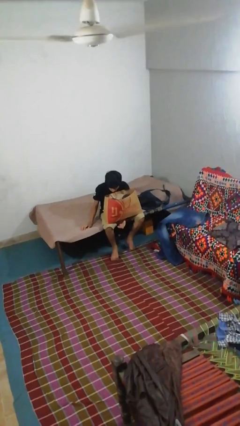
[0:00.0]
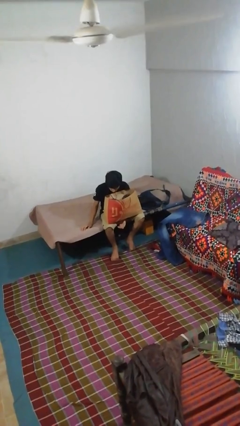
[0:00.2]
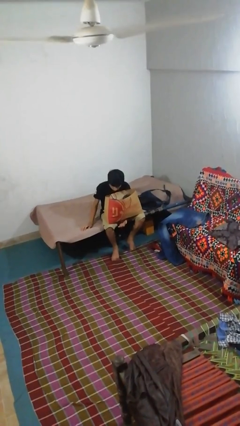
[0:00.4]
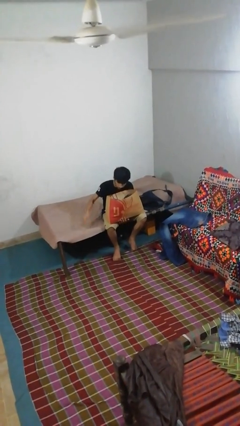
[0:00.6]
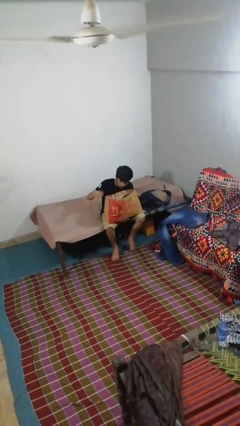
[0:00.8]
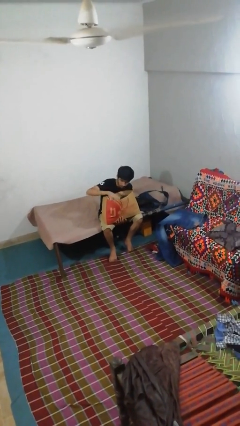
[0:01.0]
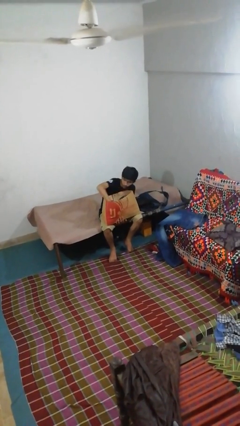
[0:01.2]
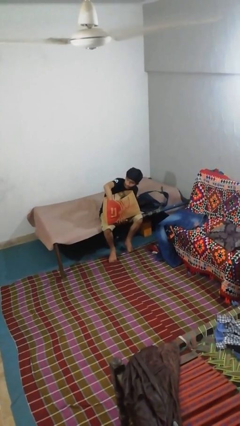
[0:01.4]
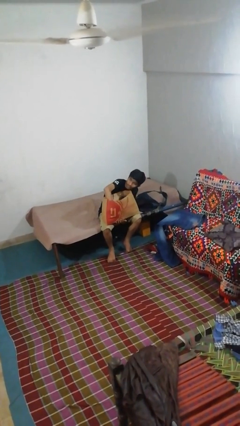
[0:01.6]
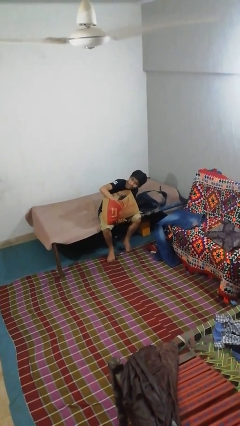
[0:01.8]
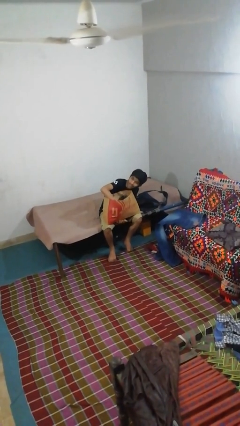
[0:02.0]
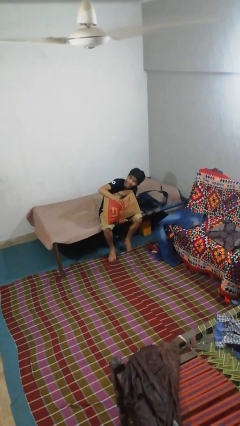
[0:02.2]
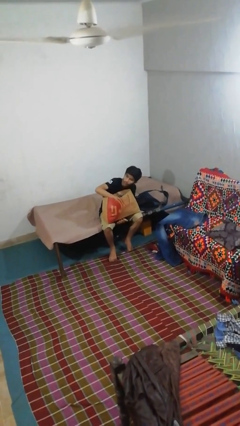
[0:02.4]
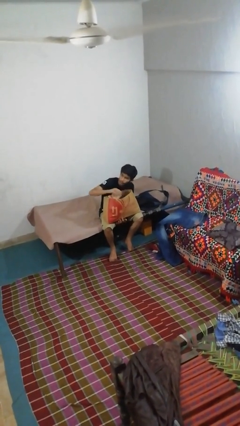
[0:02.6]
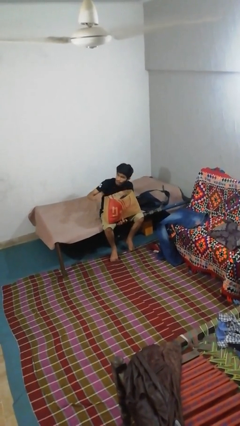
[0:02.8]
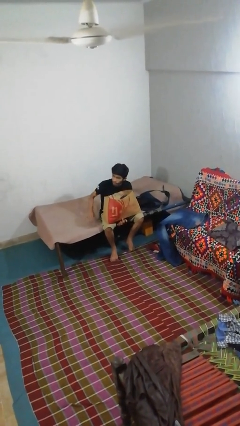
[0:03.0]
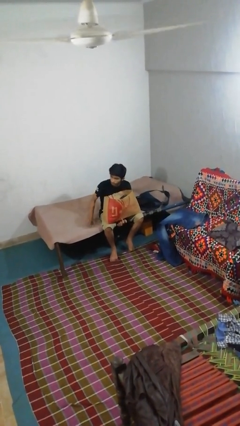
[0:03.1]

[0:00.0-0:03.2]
person searches in bag

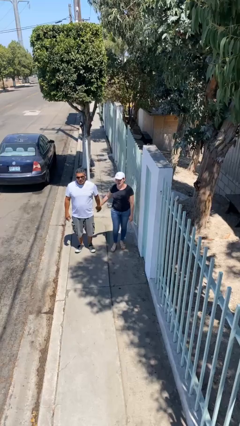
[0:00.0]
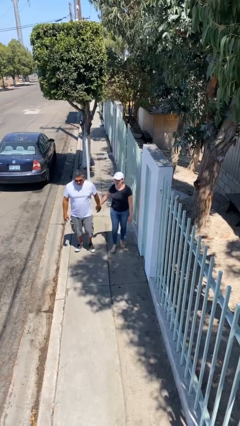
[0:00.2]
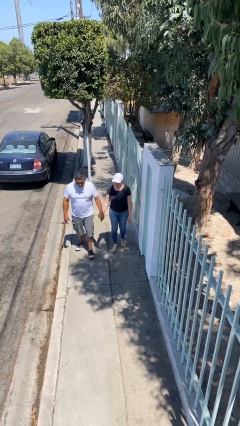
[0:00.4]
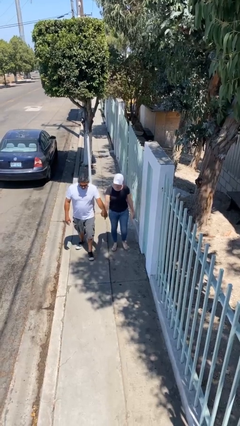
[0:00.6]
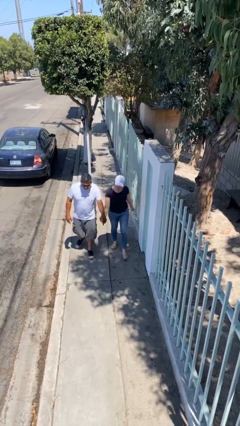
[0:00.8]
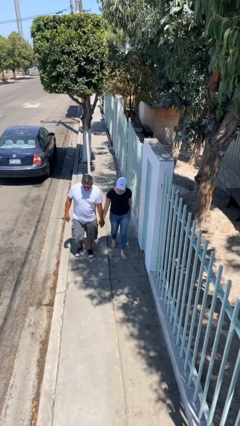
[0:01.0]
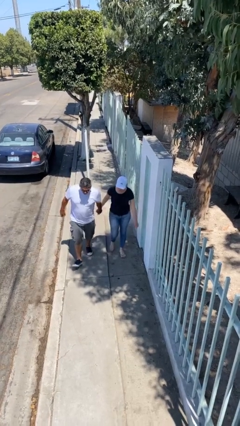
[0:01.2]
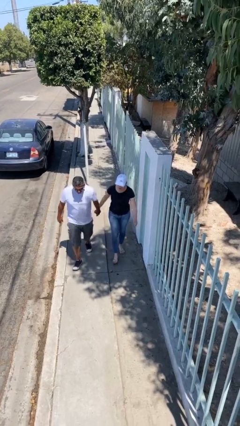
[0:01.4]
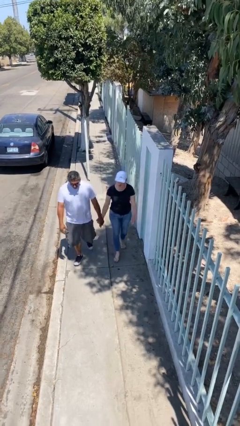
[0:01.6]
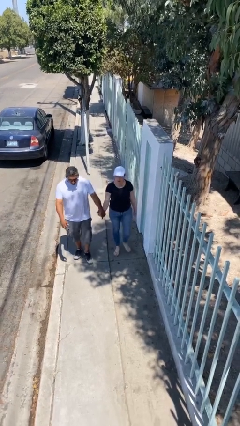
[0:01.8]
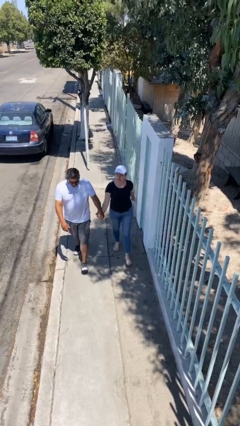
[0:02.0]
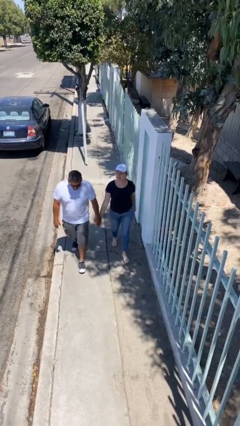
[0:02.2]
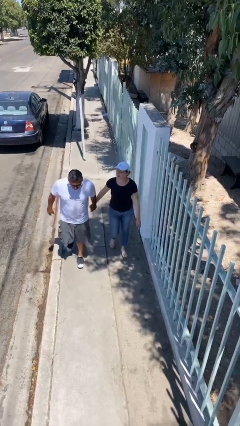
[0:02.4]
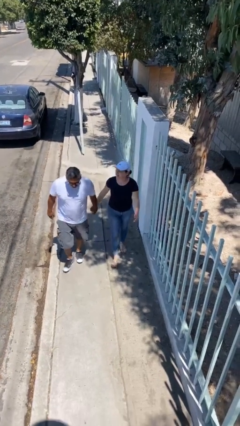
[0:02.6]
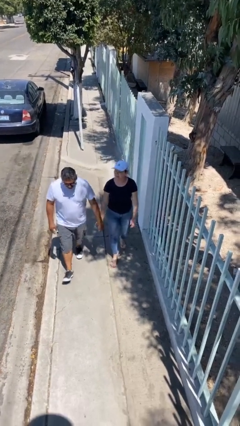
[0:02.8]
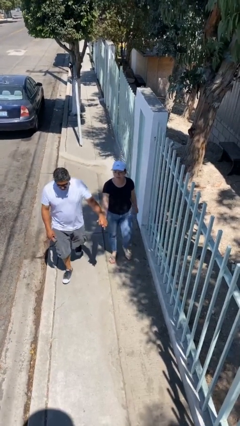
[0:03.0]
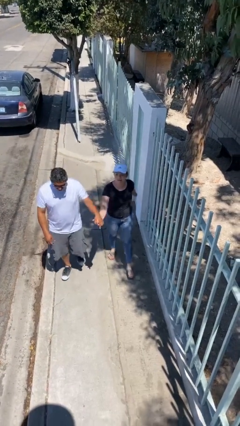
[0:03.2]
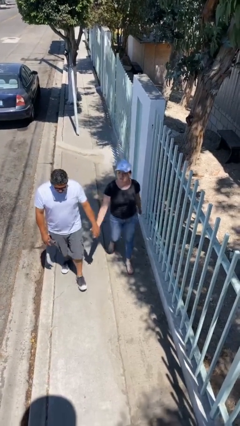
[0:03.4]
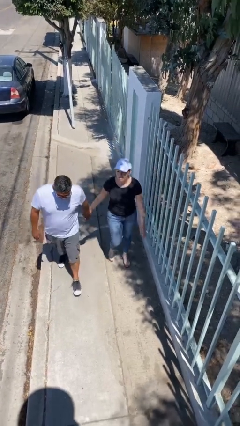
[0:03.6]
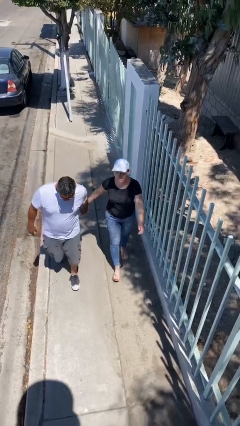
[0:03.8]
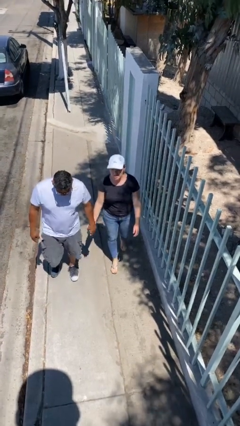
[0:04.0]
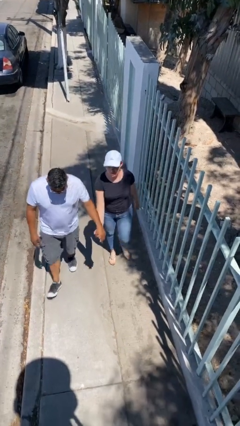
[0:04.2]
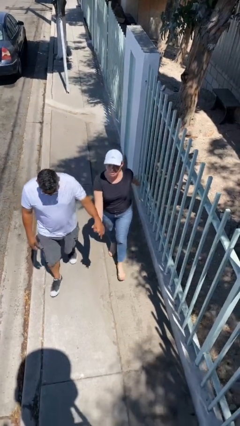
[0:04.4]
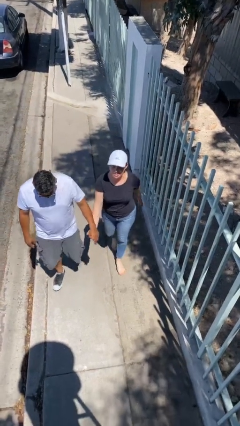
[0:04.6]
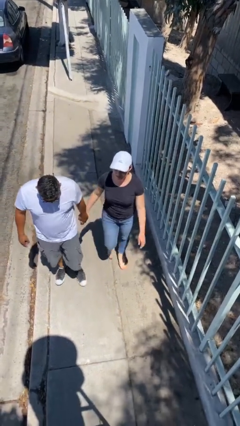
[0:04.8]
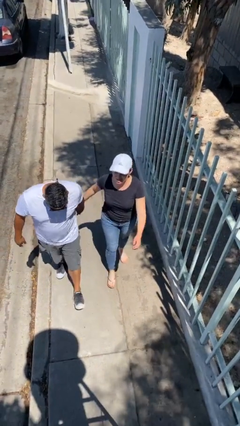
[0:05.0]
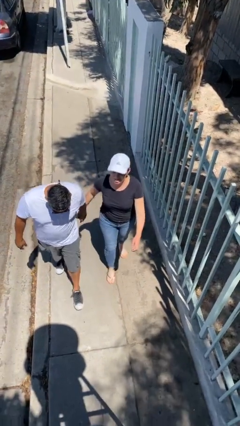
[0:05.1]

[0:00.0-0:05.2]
person holds hand

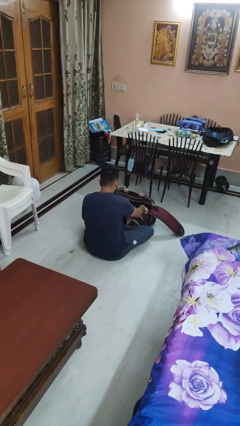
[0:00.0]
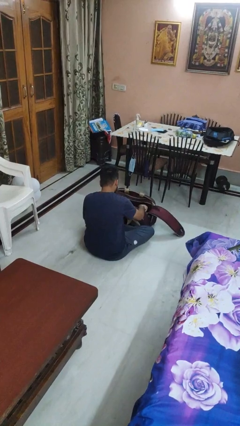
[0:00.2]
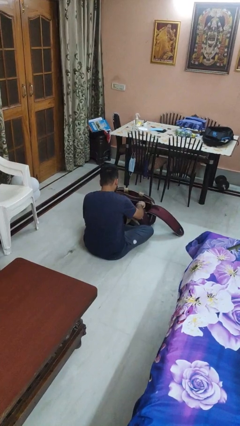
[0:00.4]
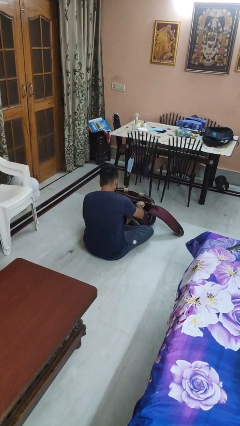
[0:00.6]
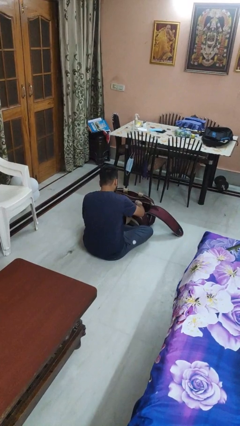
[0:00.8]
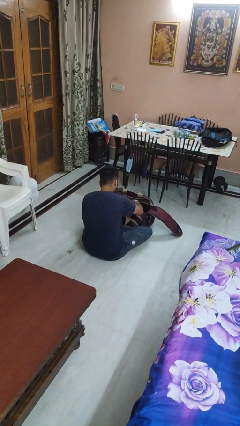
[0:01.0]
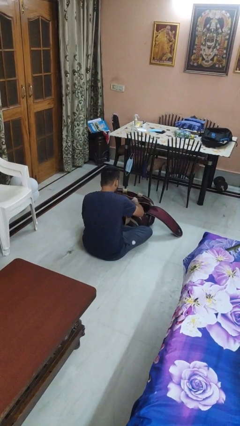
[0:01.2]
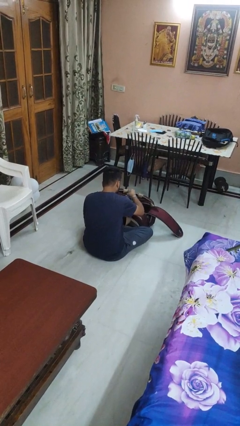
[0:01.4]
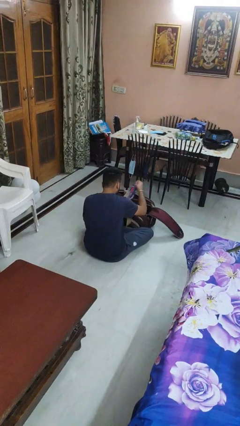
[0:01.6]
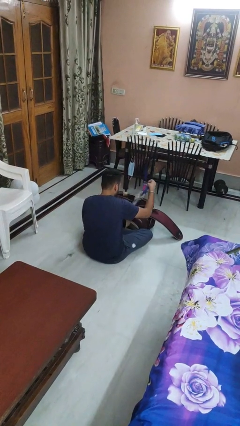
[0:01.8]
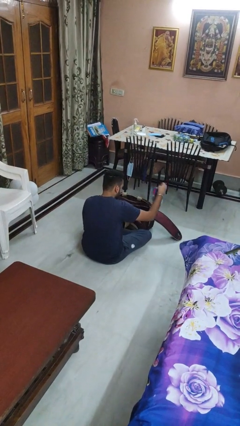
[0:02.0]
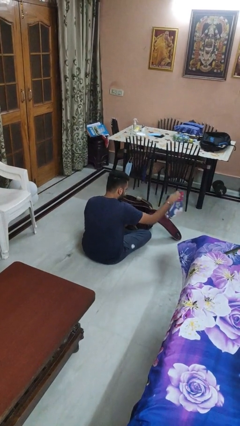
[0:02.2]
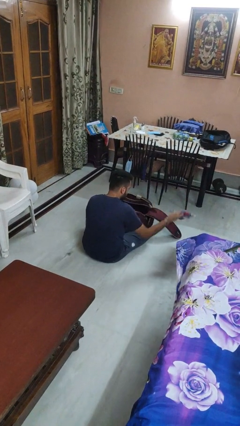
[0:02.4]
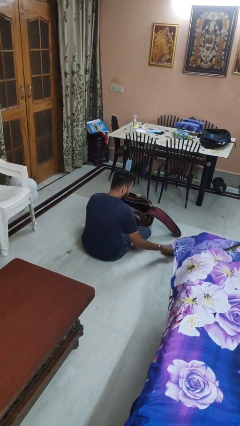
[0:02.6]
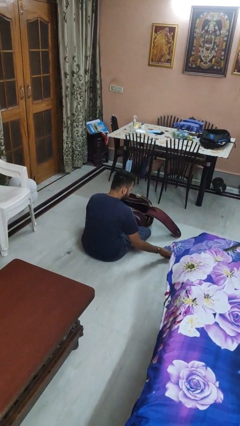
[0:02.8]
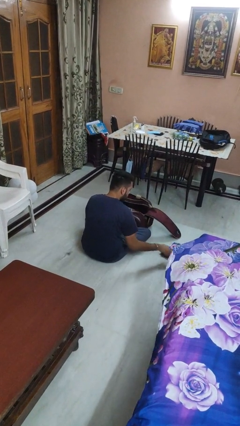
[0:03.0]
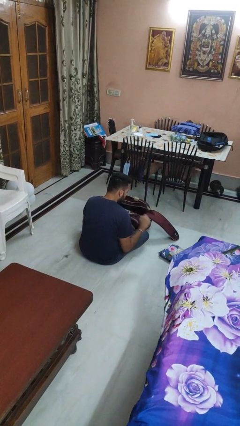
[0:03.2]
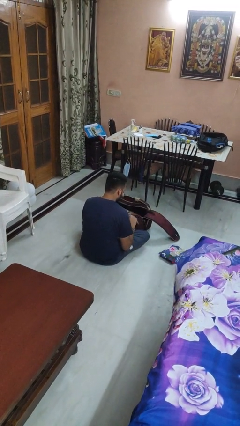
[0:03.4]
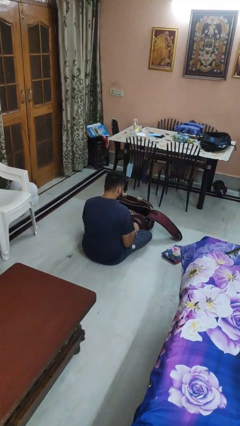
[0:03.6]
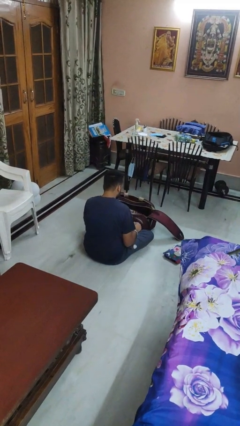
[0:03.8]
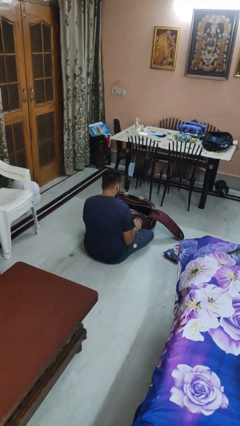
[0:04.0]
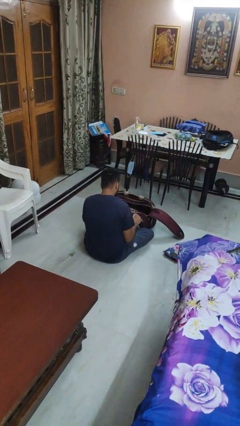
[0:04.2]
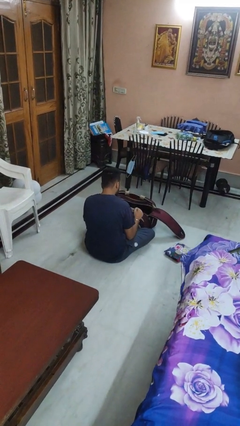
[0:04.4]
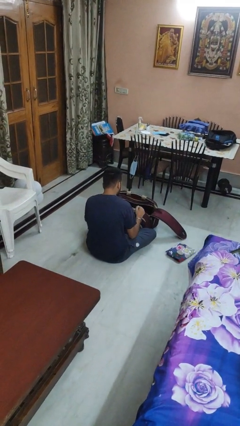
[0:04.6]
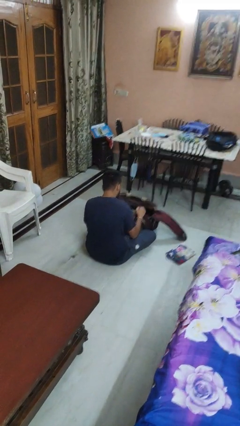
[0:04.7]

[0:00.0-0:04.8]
person arranges flowers in vase

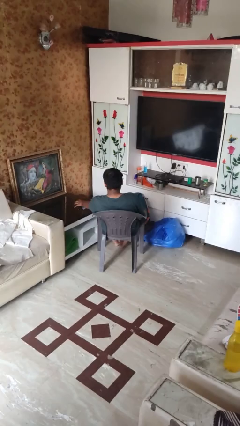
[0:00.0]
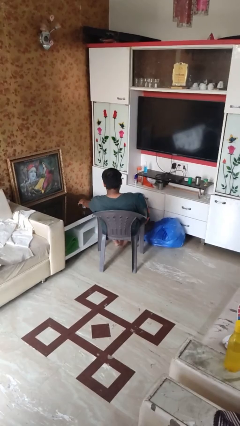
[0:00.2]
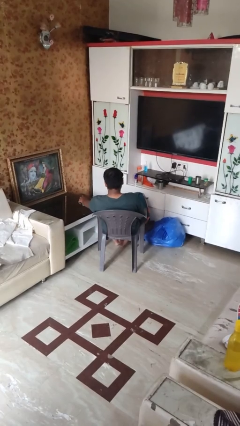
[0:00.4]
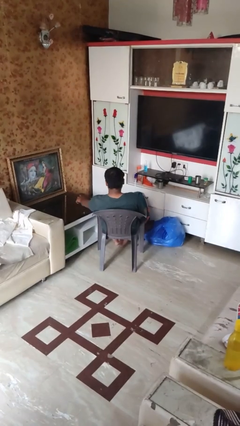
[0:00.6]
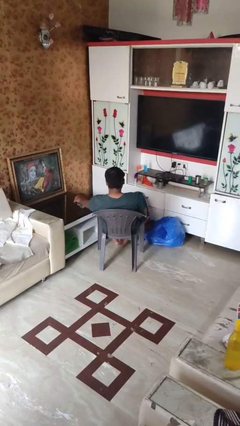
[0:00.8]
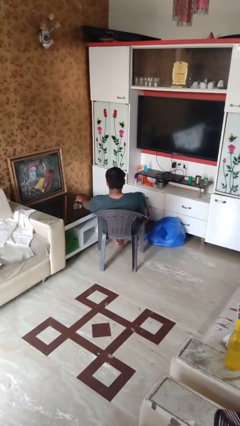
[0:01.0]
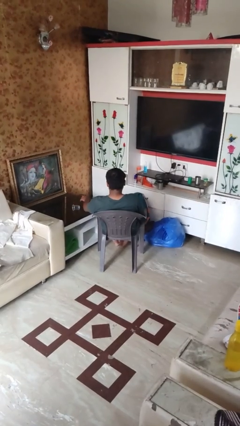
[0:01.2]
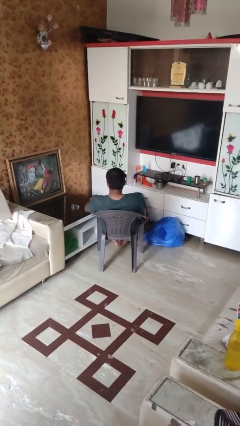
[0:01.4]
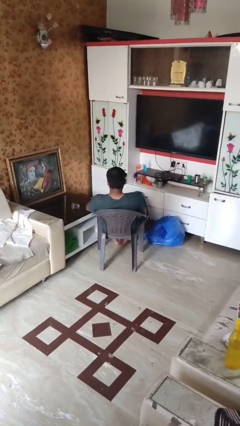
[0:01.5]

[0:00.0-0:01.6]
person knocks over glass

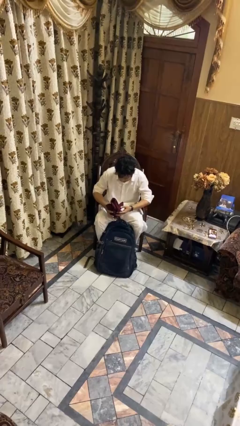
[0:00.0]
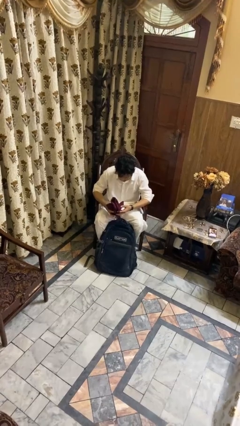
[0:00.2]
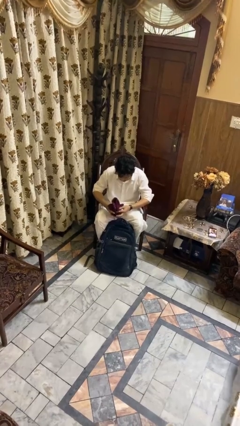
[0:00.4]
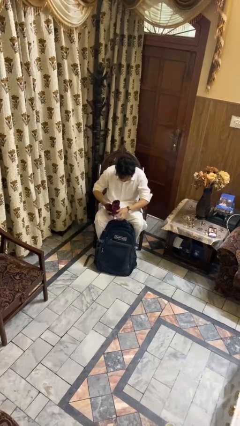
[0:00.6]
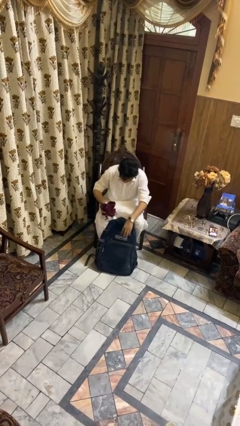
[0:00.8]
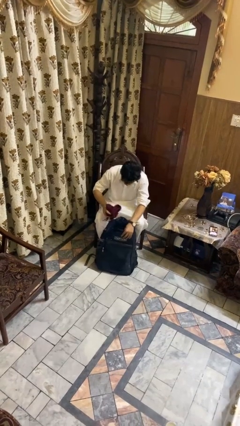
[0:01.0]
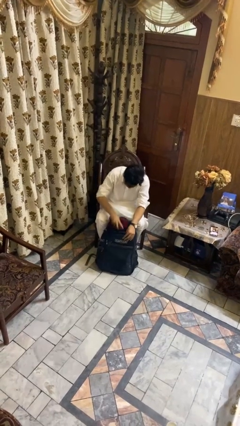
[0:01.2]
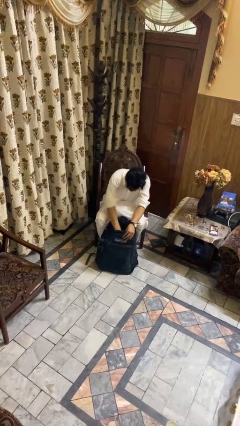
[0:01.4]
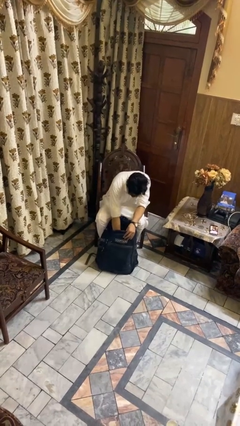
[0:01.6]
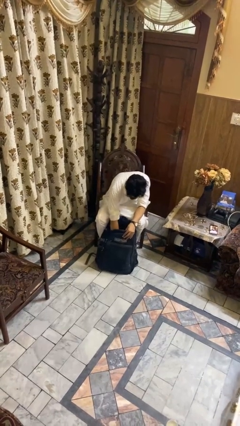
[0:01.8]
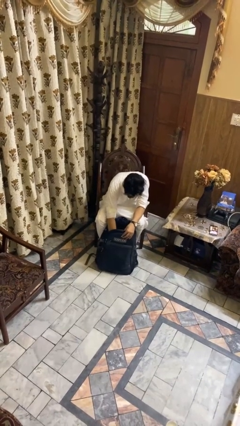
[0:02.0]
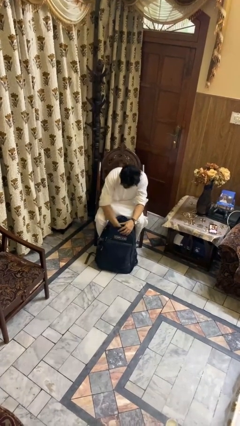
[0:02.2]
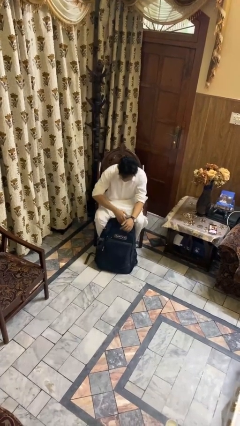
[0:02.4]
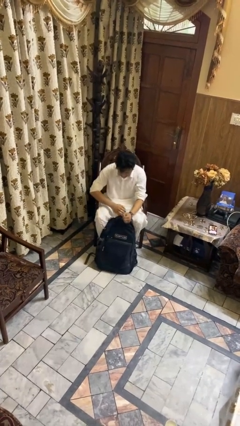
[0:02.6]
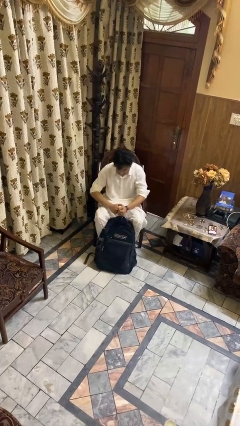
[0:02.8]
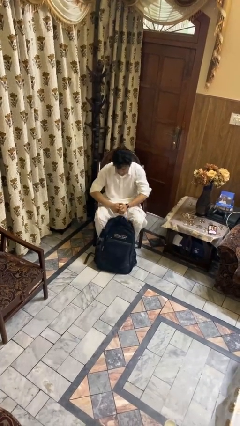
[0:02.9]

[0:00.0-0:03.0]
person puts object into backpack
